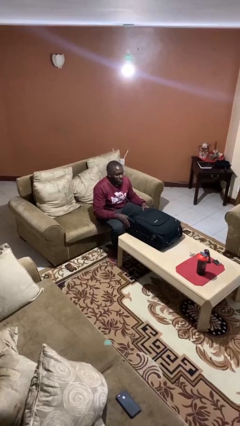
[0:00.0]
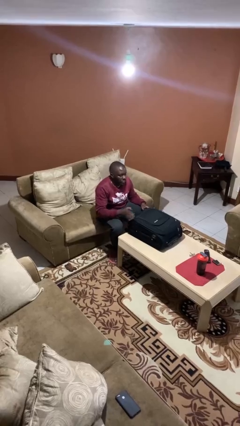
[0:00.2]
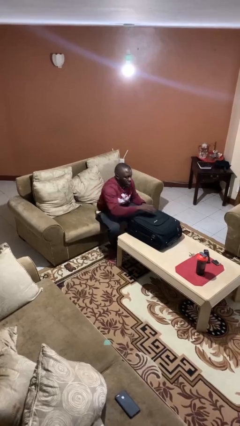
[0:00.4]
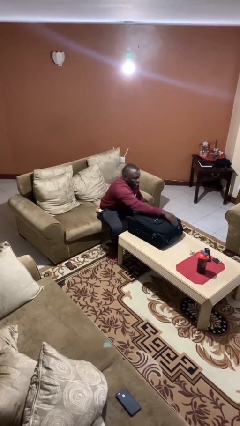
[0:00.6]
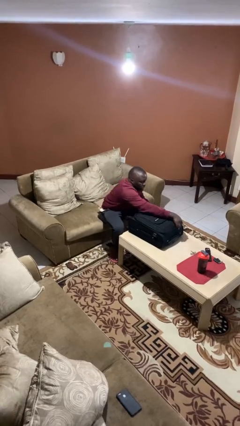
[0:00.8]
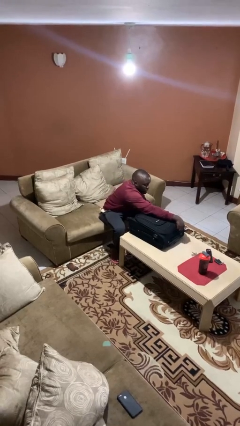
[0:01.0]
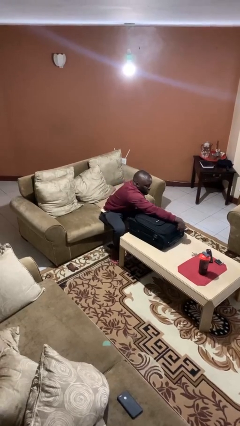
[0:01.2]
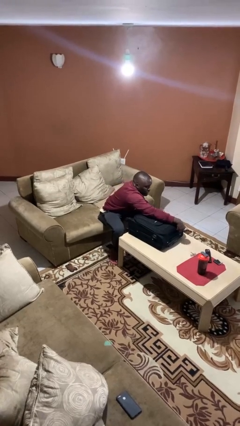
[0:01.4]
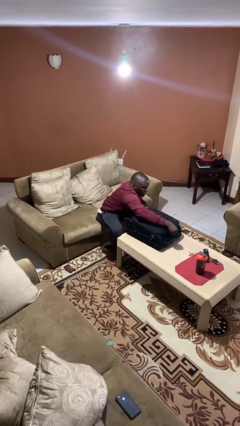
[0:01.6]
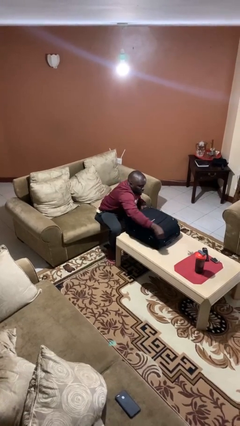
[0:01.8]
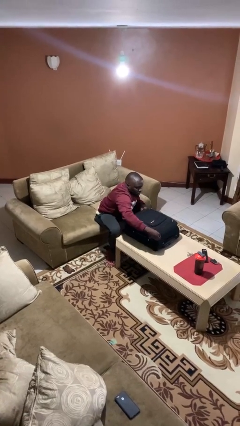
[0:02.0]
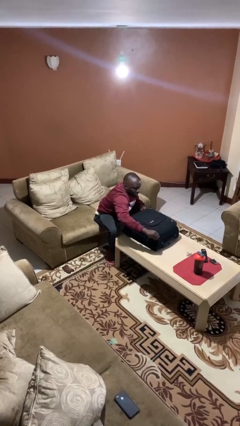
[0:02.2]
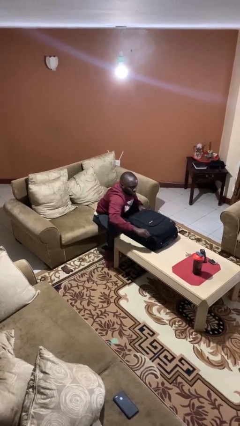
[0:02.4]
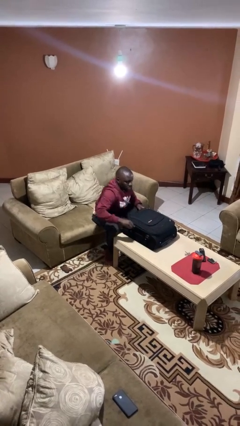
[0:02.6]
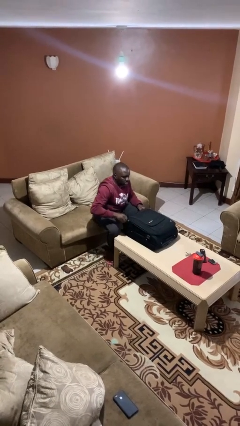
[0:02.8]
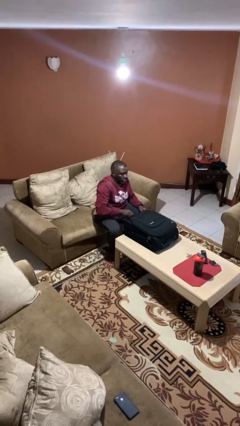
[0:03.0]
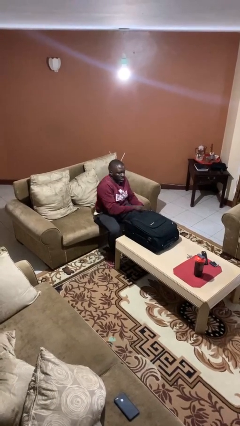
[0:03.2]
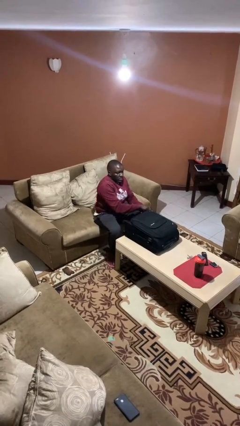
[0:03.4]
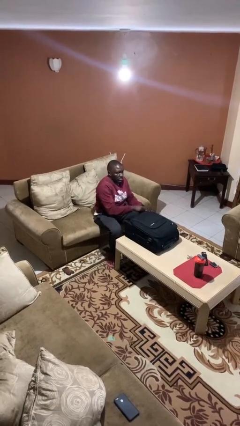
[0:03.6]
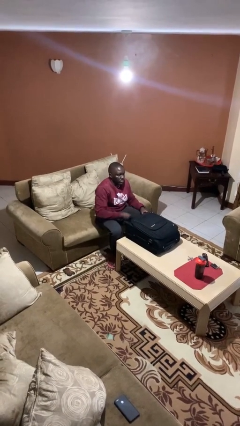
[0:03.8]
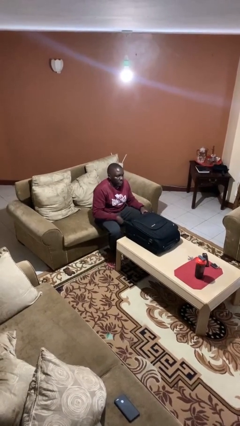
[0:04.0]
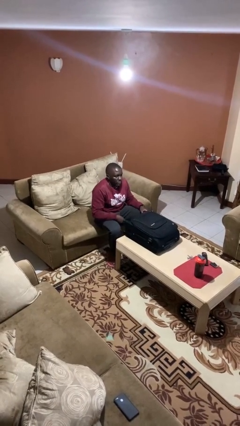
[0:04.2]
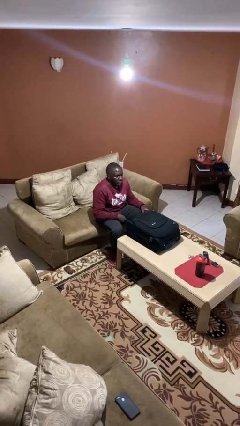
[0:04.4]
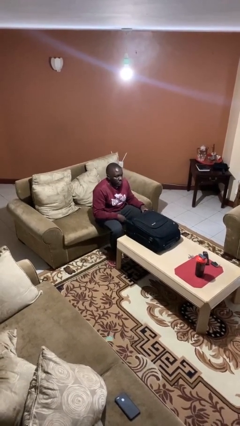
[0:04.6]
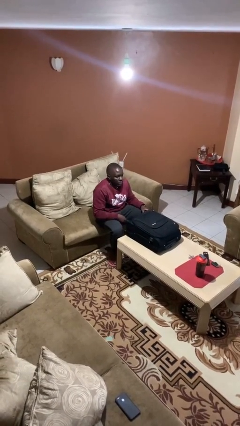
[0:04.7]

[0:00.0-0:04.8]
person opens suitcase

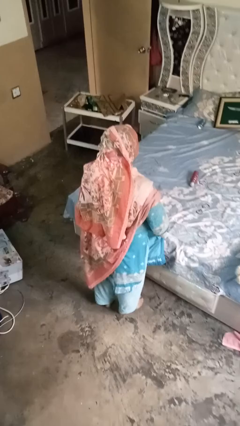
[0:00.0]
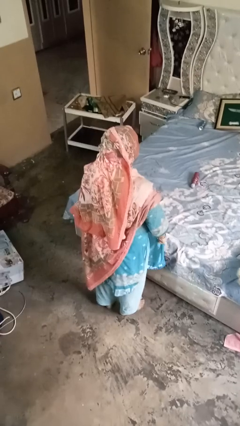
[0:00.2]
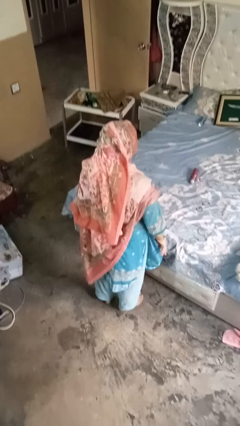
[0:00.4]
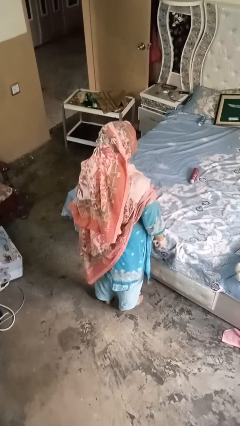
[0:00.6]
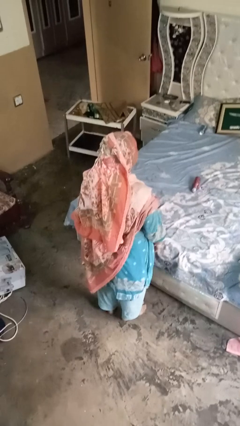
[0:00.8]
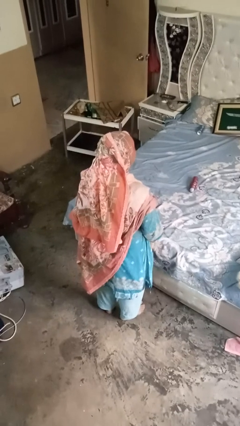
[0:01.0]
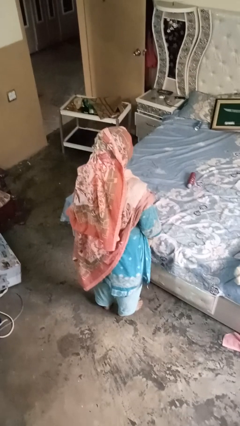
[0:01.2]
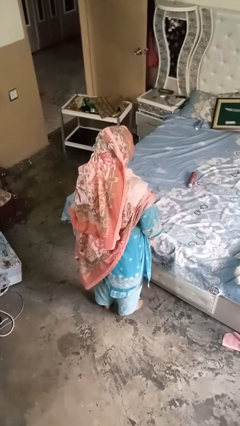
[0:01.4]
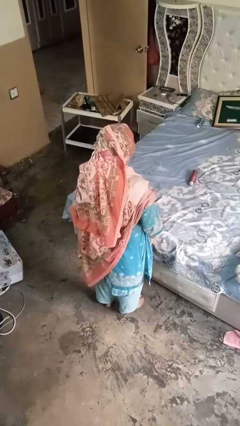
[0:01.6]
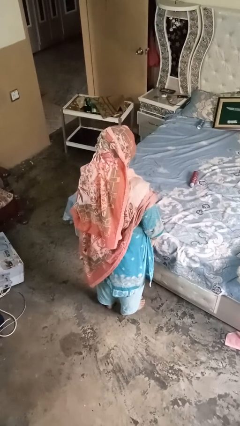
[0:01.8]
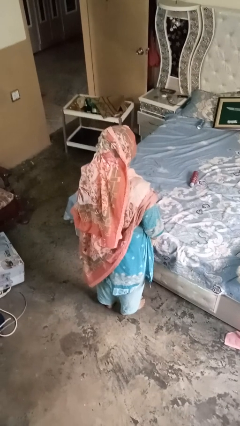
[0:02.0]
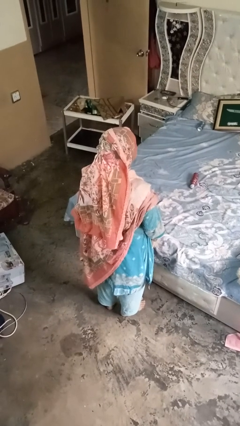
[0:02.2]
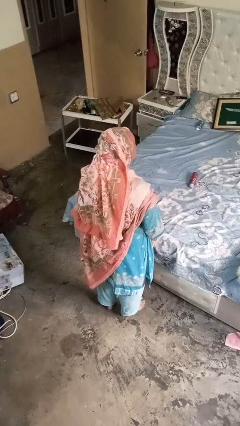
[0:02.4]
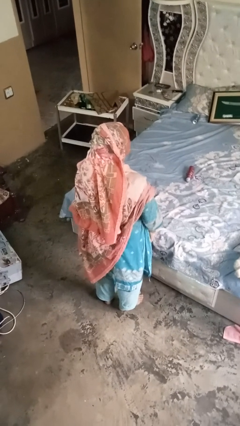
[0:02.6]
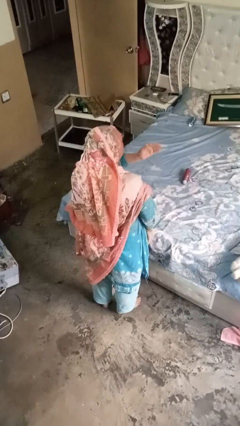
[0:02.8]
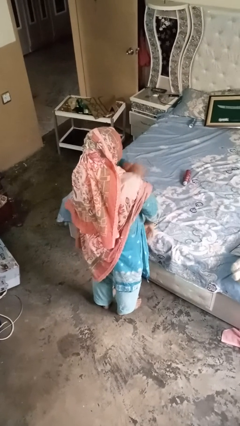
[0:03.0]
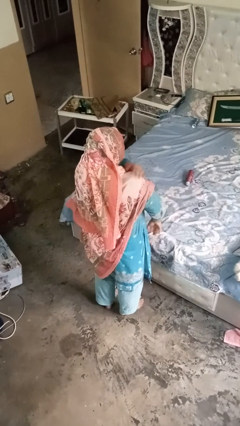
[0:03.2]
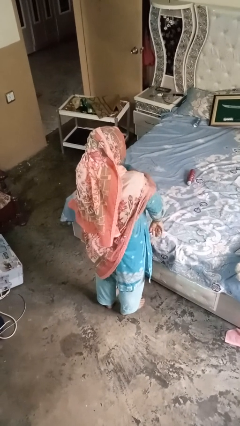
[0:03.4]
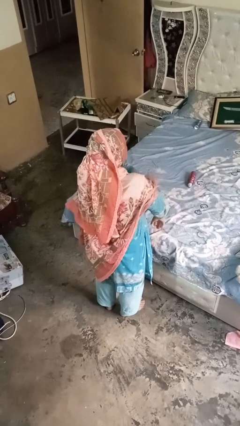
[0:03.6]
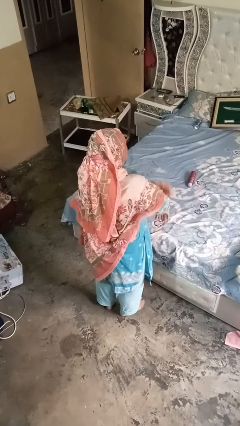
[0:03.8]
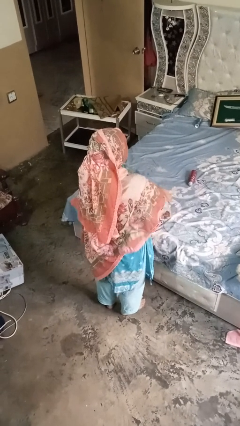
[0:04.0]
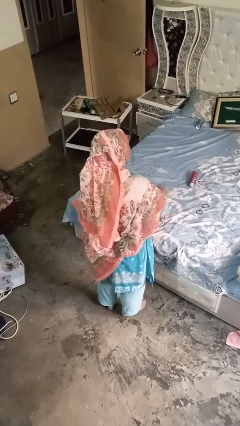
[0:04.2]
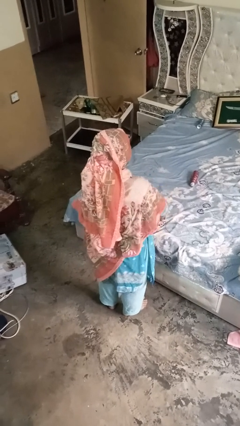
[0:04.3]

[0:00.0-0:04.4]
person swats bug

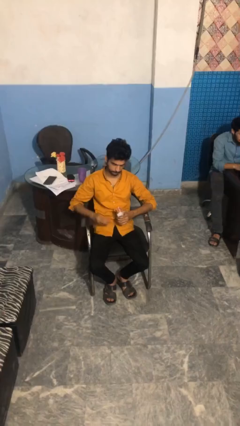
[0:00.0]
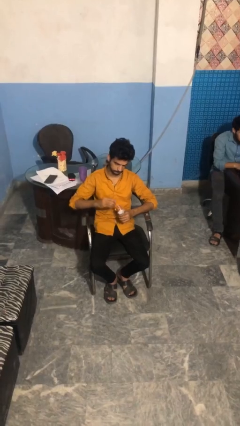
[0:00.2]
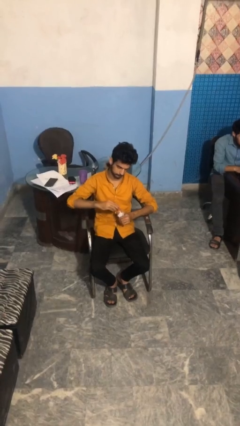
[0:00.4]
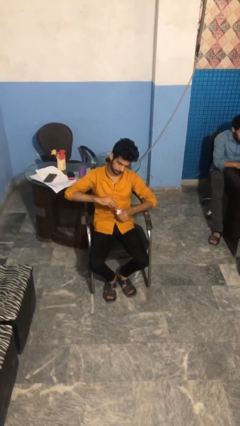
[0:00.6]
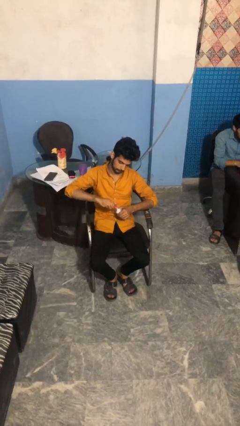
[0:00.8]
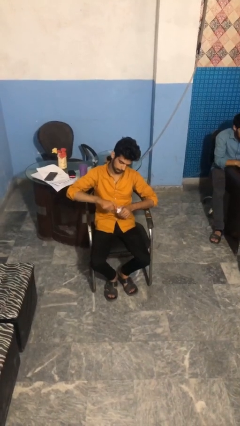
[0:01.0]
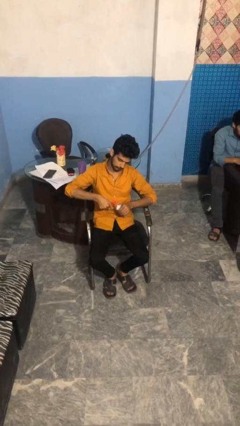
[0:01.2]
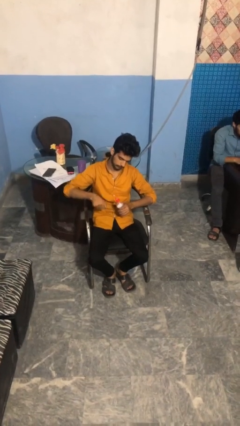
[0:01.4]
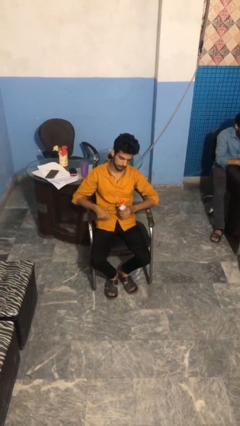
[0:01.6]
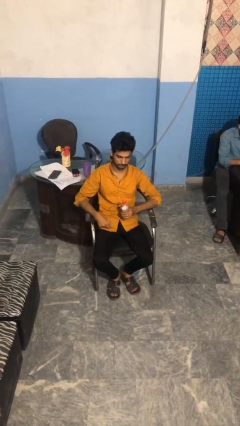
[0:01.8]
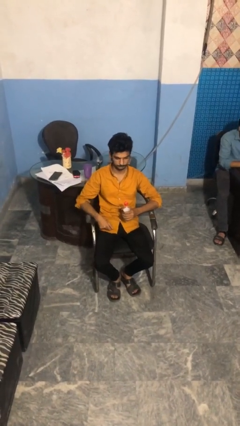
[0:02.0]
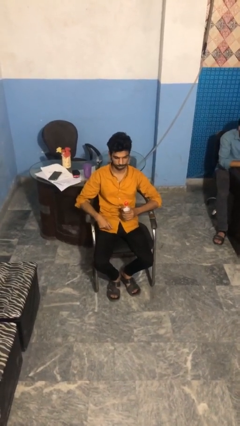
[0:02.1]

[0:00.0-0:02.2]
person screws lid to bottle

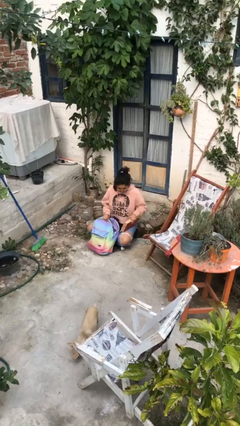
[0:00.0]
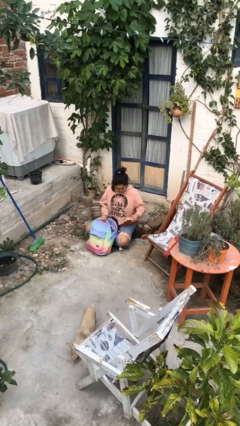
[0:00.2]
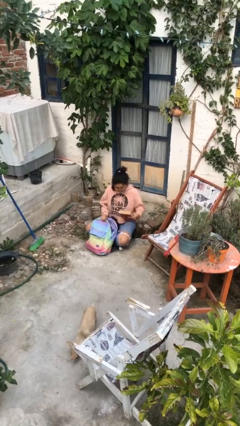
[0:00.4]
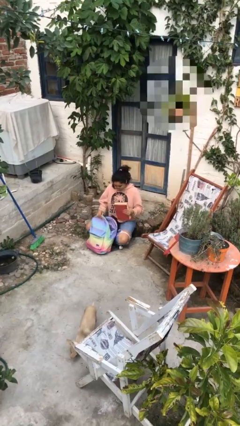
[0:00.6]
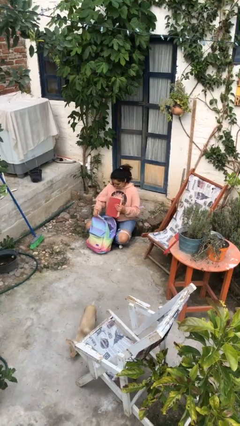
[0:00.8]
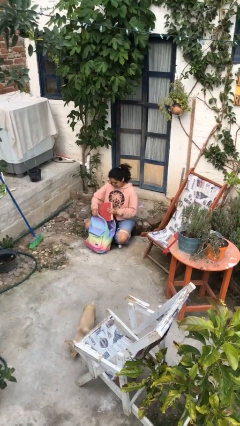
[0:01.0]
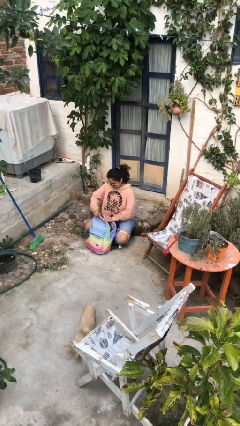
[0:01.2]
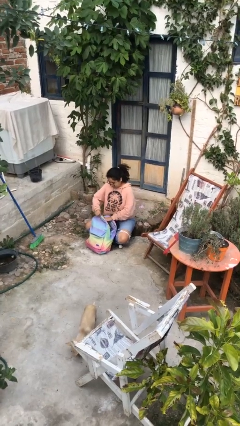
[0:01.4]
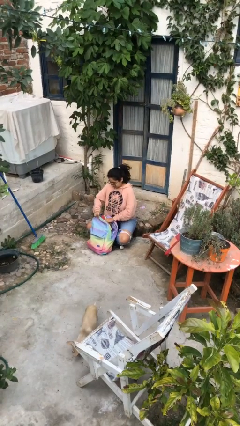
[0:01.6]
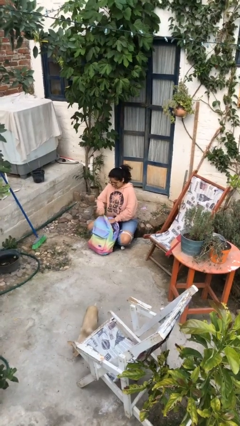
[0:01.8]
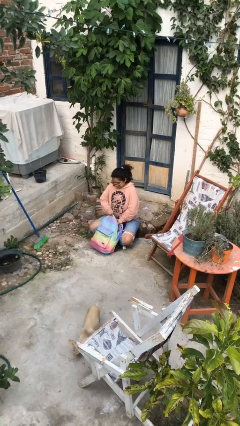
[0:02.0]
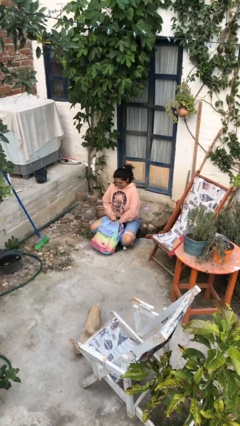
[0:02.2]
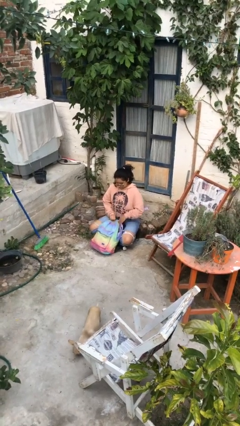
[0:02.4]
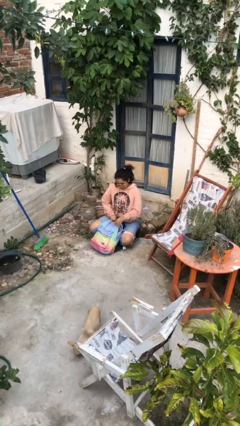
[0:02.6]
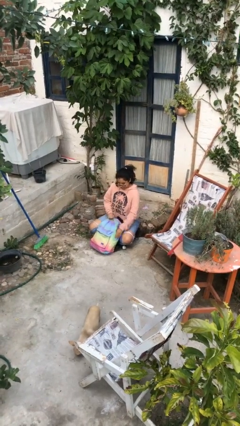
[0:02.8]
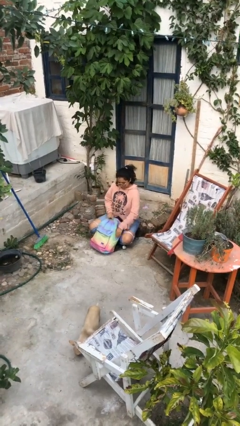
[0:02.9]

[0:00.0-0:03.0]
person puts object into backpack

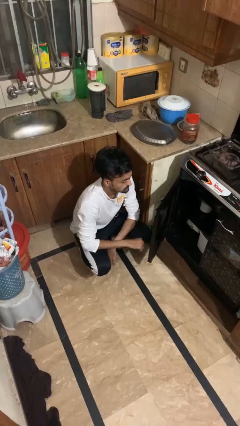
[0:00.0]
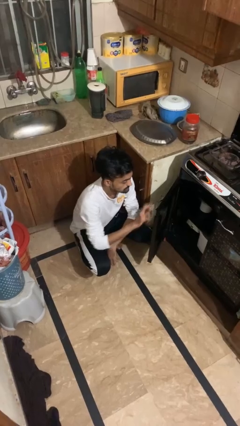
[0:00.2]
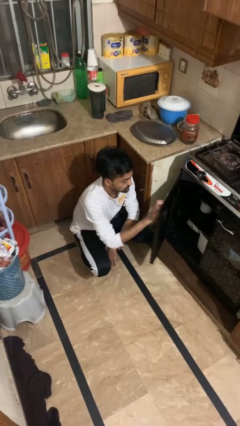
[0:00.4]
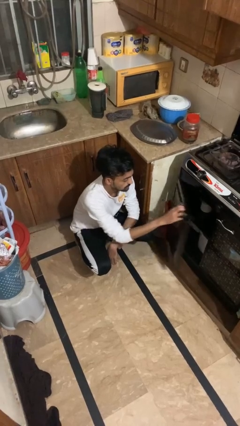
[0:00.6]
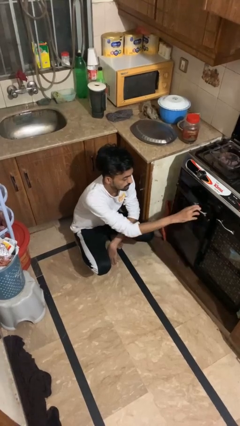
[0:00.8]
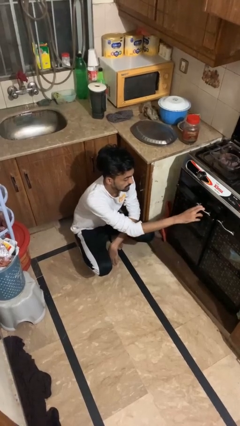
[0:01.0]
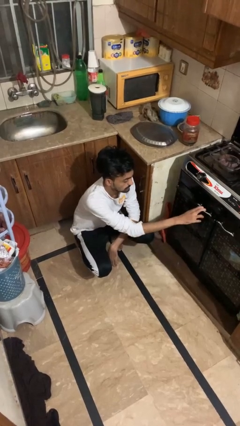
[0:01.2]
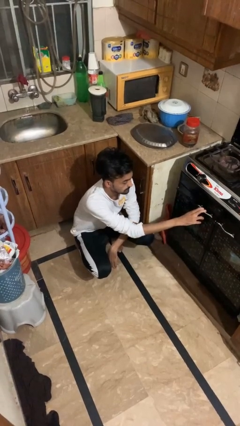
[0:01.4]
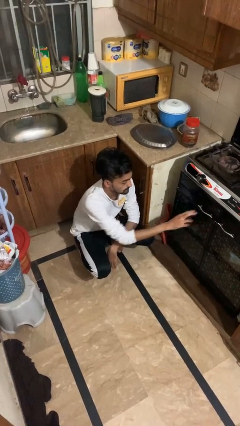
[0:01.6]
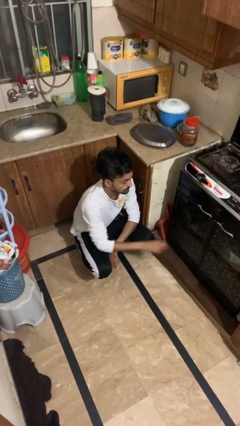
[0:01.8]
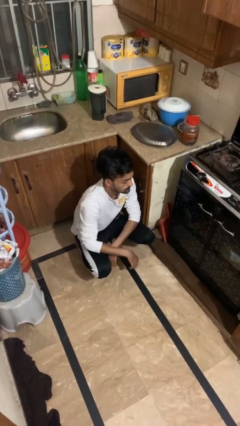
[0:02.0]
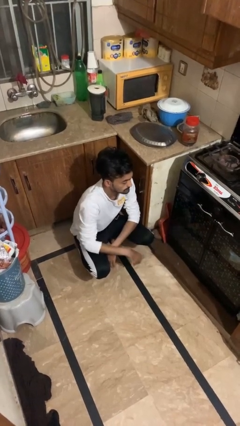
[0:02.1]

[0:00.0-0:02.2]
person closes oven door

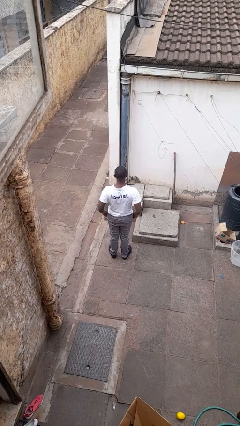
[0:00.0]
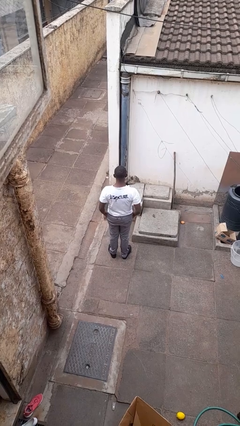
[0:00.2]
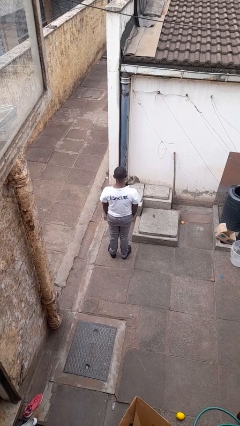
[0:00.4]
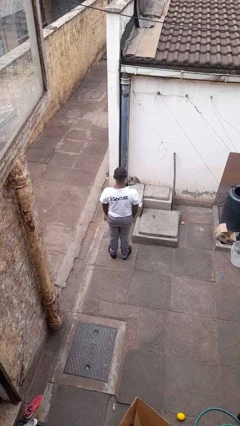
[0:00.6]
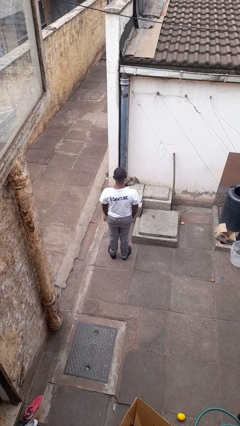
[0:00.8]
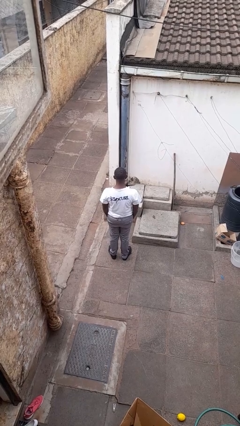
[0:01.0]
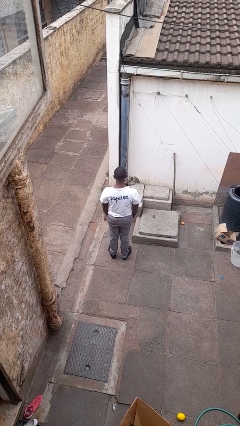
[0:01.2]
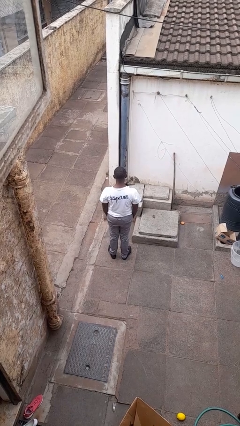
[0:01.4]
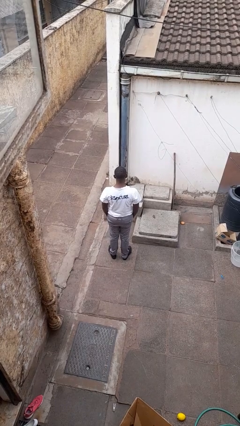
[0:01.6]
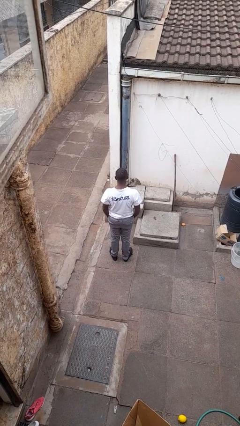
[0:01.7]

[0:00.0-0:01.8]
person puts hands in back pockets
